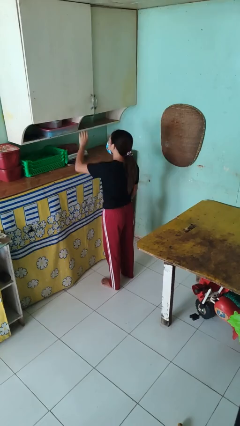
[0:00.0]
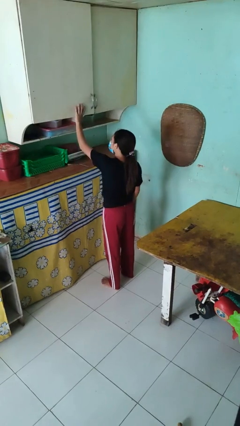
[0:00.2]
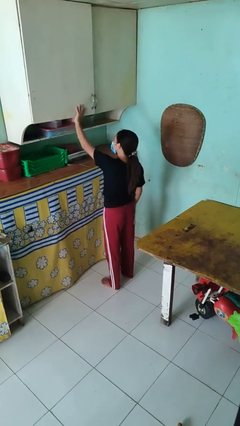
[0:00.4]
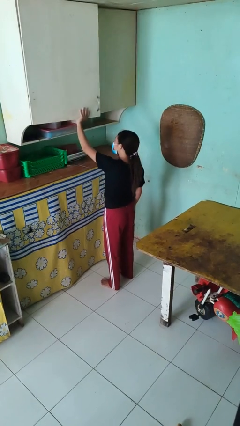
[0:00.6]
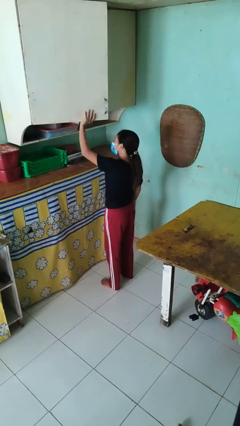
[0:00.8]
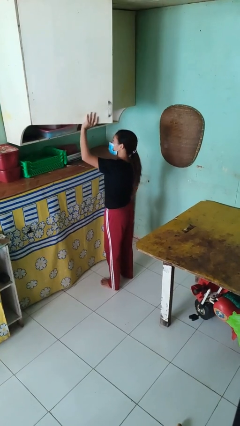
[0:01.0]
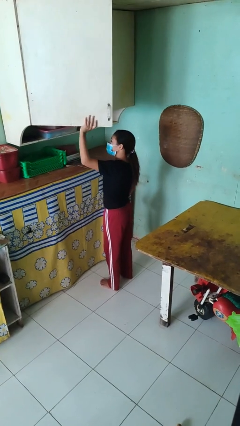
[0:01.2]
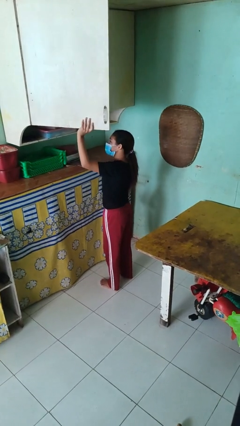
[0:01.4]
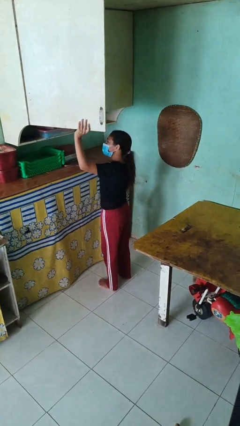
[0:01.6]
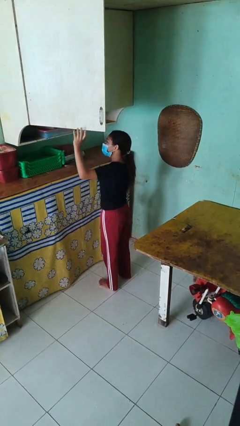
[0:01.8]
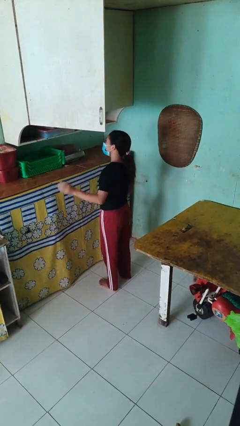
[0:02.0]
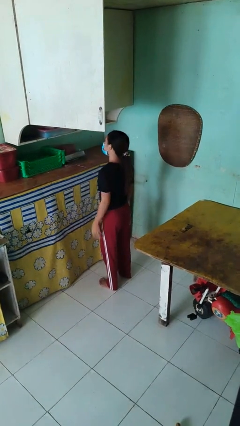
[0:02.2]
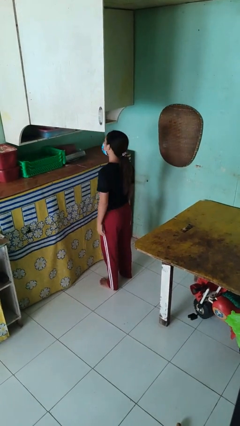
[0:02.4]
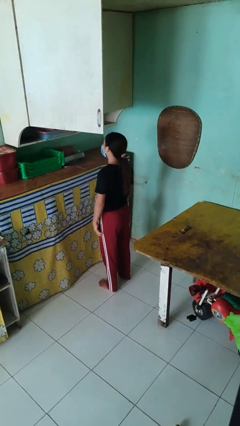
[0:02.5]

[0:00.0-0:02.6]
person opens cabinet

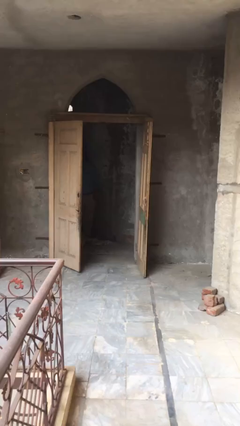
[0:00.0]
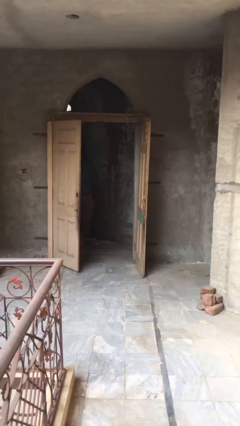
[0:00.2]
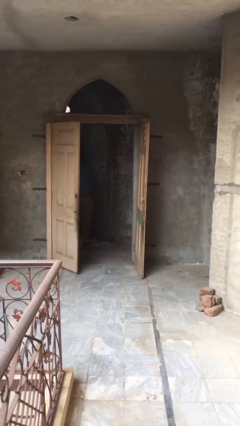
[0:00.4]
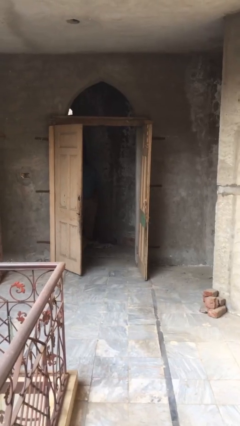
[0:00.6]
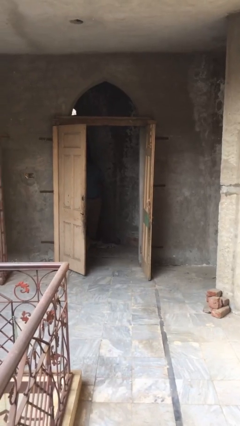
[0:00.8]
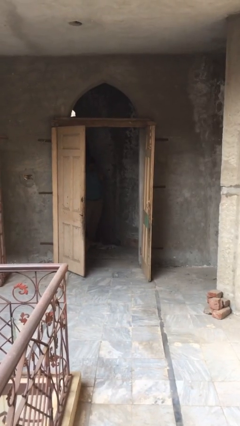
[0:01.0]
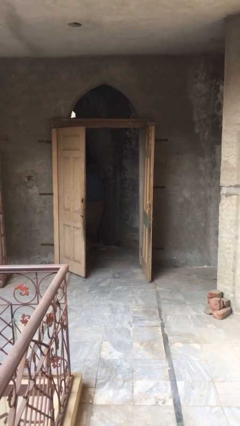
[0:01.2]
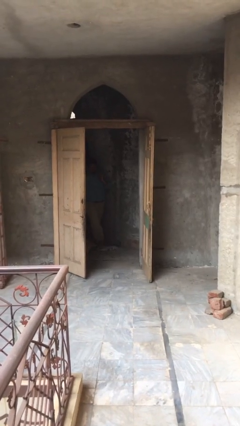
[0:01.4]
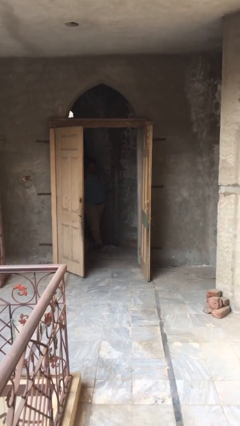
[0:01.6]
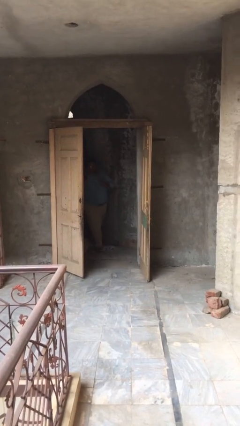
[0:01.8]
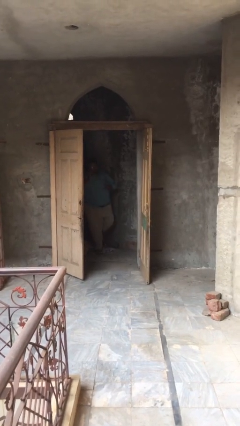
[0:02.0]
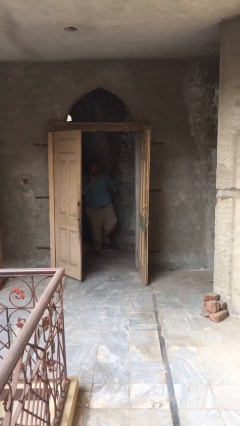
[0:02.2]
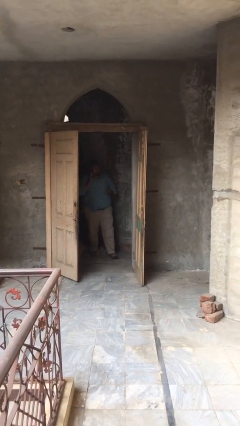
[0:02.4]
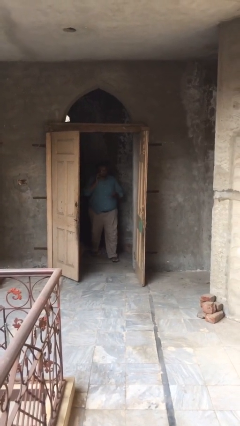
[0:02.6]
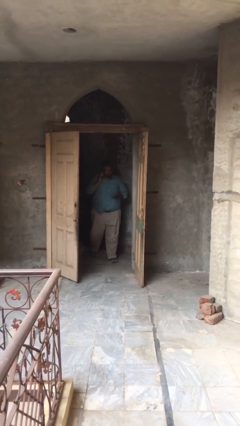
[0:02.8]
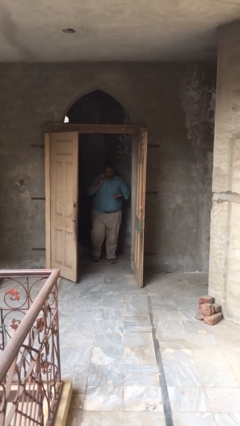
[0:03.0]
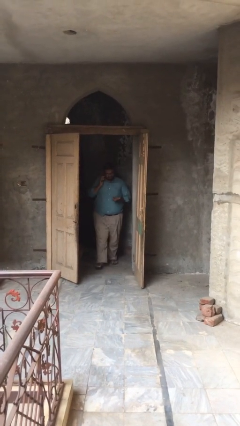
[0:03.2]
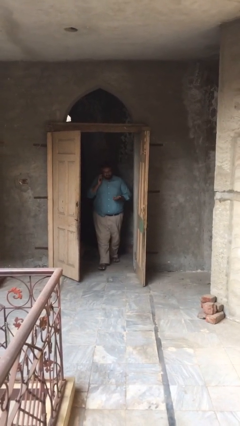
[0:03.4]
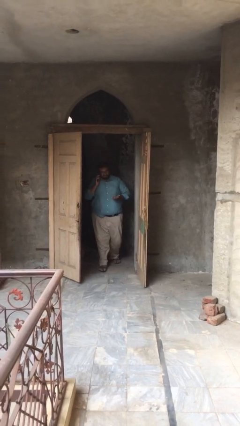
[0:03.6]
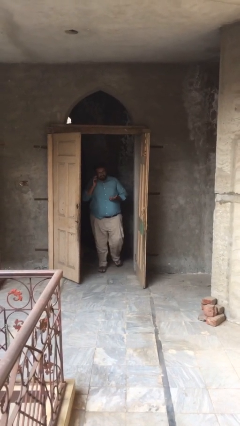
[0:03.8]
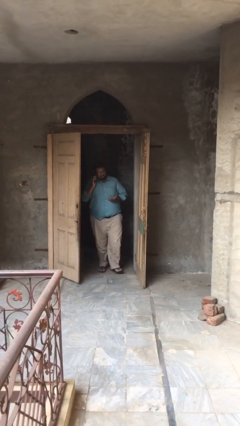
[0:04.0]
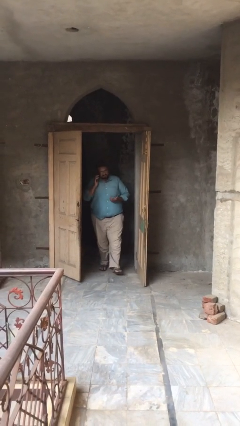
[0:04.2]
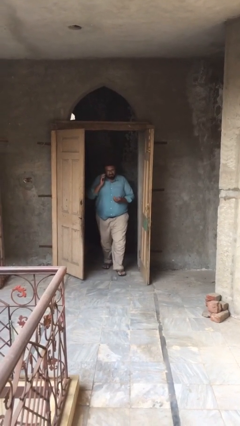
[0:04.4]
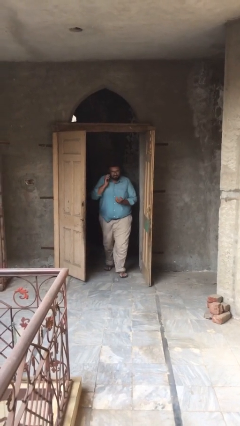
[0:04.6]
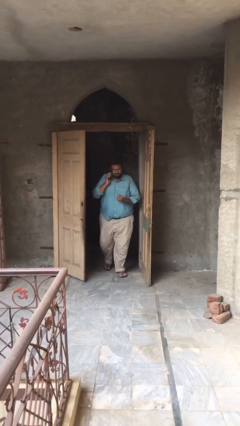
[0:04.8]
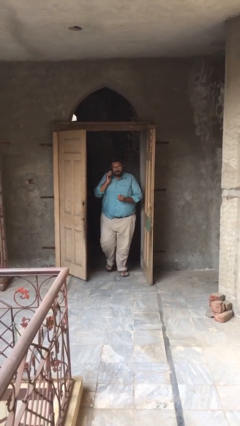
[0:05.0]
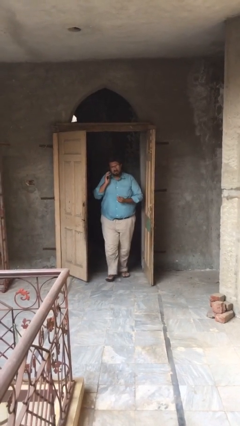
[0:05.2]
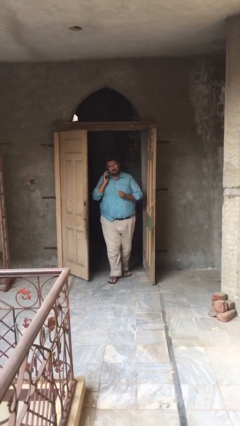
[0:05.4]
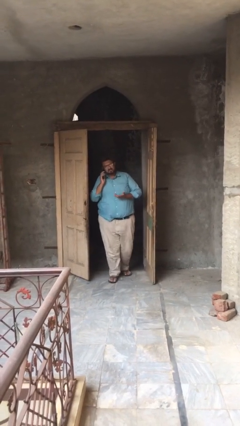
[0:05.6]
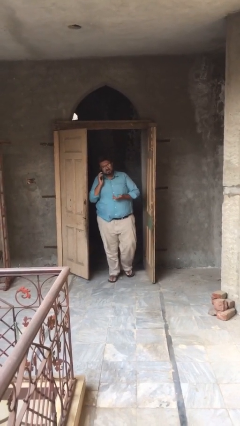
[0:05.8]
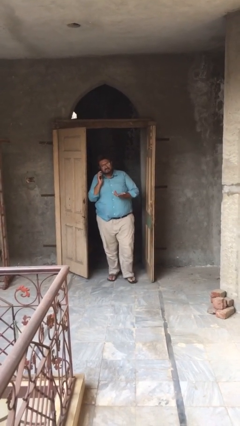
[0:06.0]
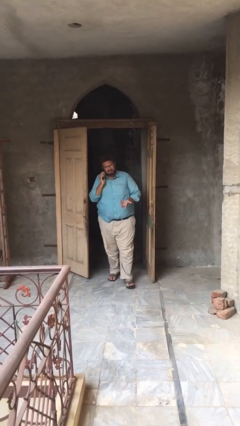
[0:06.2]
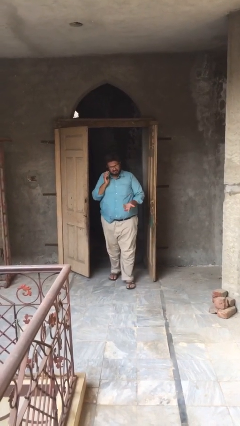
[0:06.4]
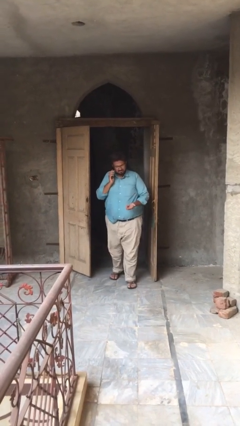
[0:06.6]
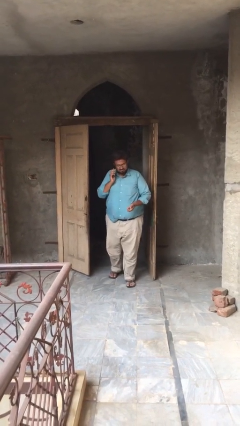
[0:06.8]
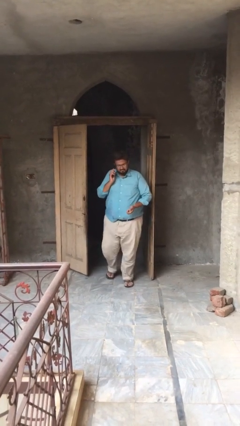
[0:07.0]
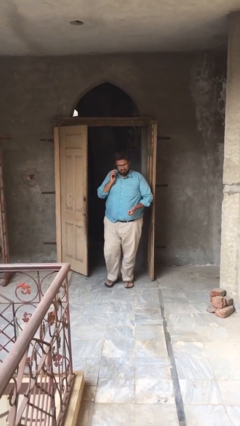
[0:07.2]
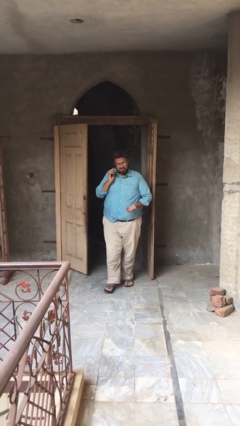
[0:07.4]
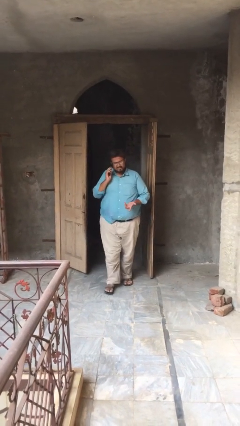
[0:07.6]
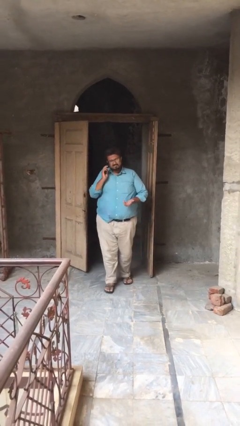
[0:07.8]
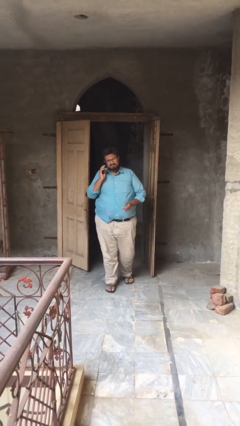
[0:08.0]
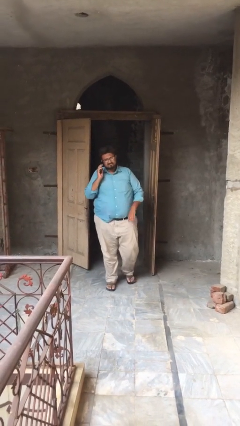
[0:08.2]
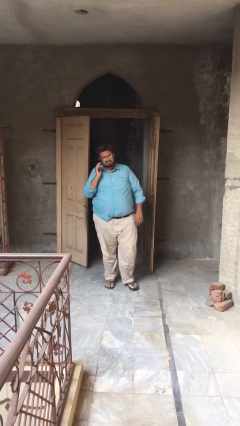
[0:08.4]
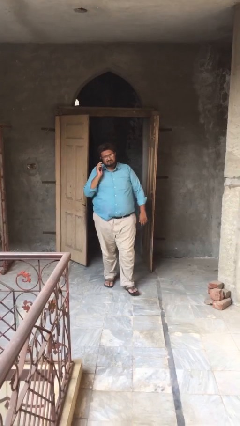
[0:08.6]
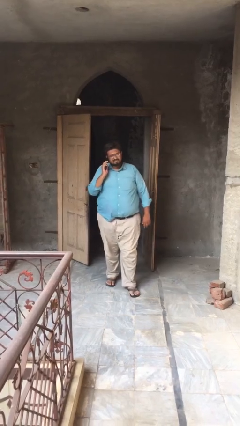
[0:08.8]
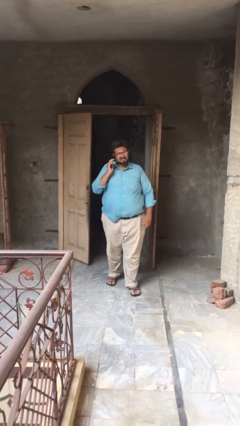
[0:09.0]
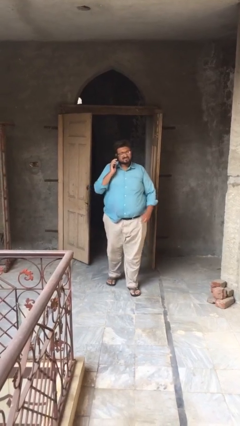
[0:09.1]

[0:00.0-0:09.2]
person enters scene through structure

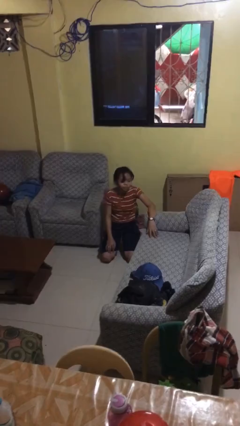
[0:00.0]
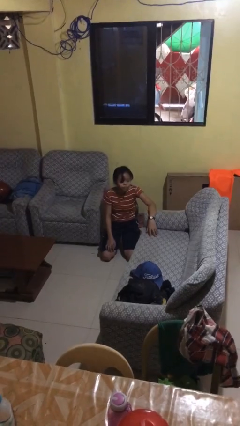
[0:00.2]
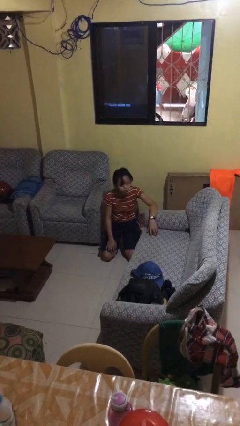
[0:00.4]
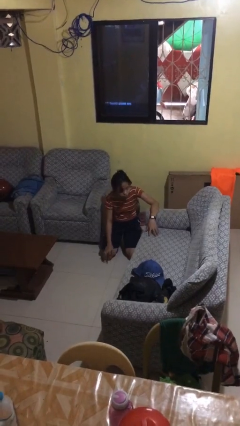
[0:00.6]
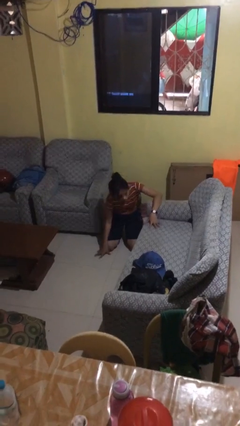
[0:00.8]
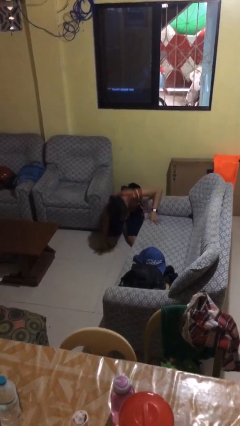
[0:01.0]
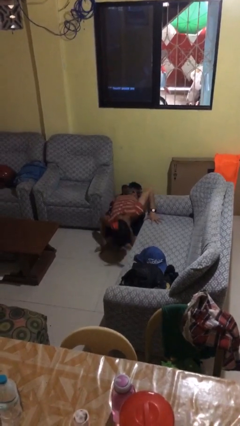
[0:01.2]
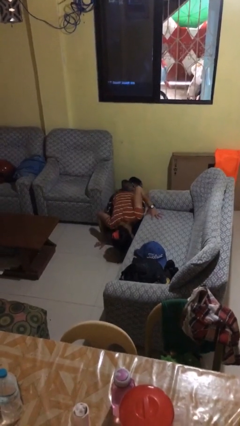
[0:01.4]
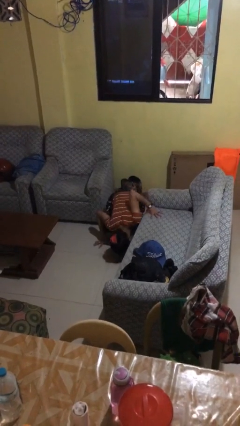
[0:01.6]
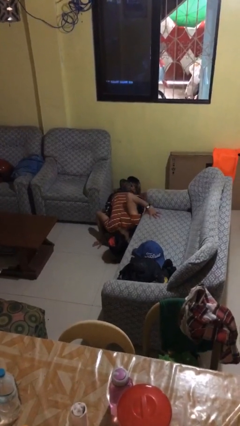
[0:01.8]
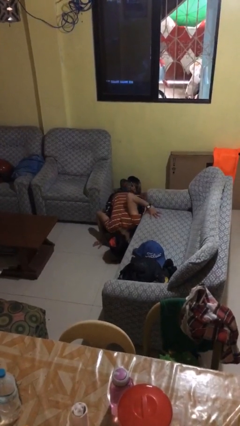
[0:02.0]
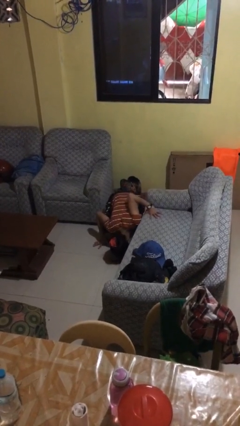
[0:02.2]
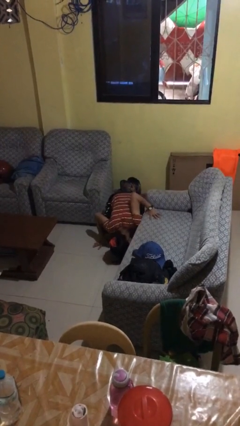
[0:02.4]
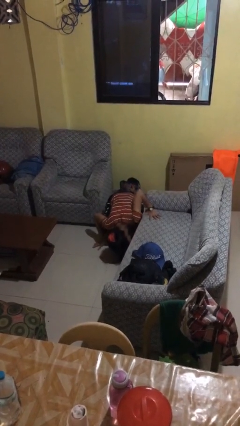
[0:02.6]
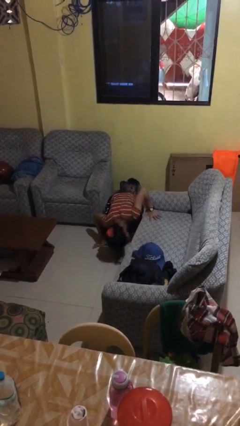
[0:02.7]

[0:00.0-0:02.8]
person searches under couch

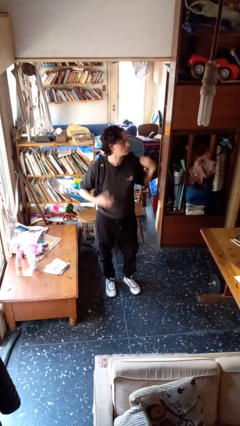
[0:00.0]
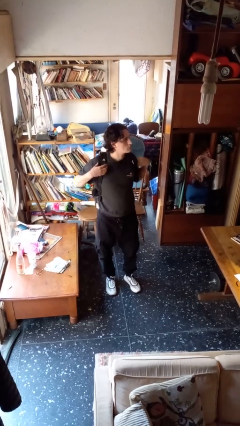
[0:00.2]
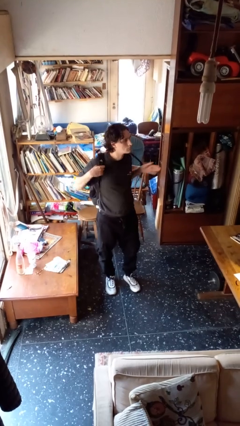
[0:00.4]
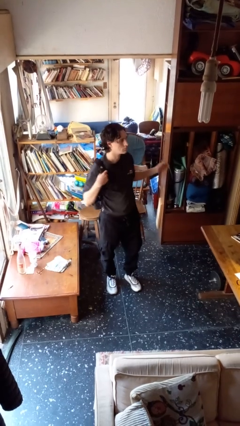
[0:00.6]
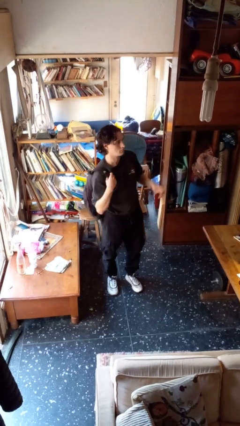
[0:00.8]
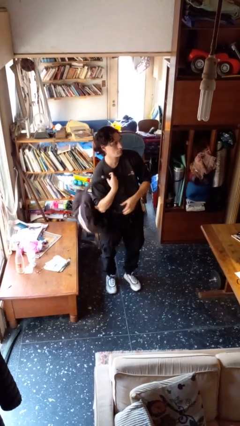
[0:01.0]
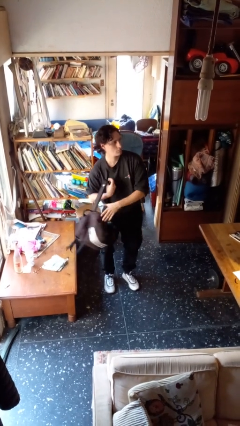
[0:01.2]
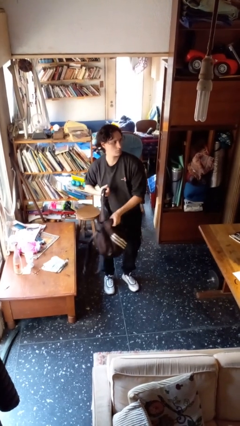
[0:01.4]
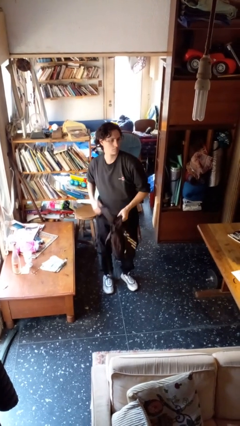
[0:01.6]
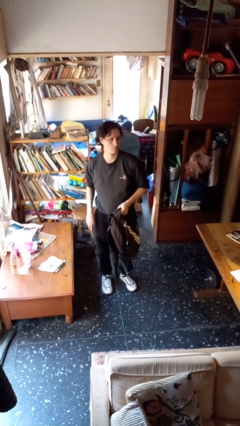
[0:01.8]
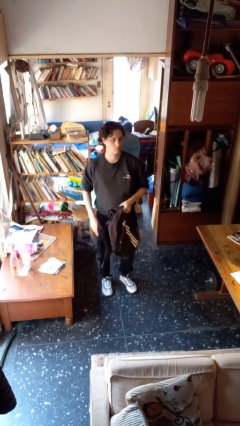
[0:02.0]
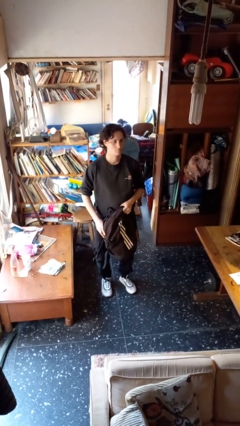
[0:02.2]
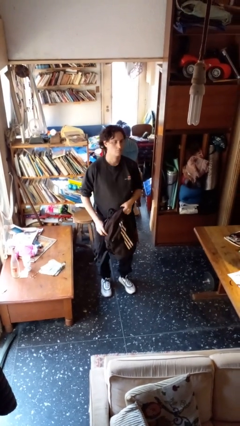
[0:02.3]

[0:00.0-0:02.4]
person takes off backpack

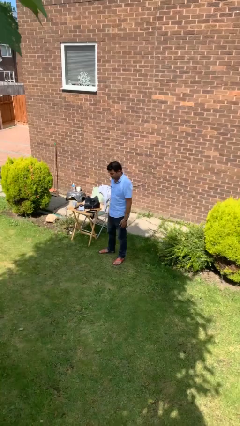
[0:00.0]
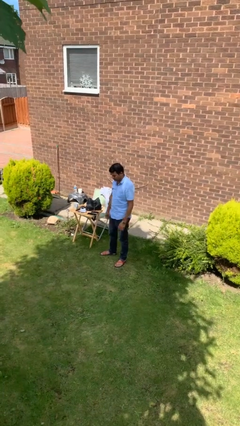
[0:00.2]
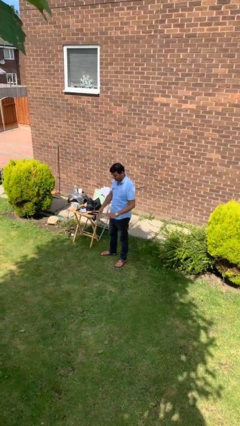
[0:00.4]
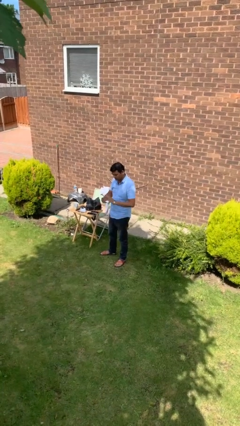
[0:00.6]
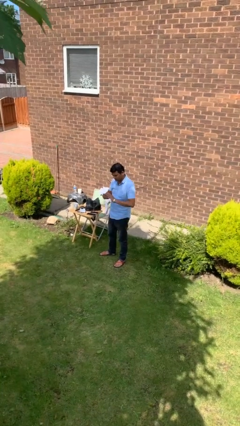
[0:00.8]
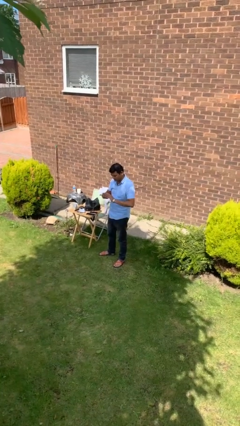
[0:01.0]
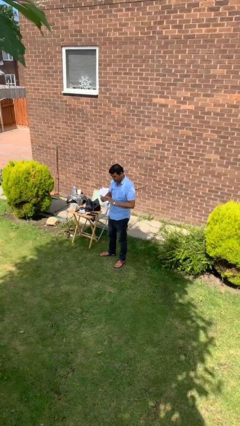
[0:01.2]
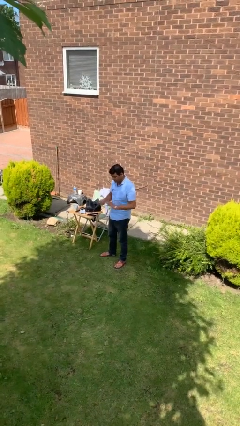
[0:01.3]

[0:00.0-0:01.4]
person takes off ring
